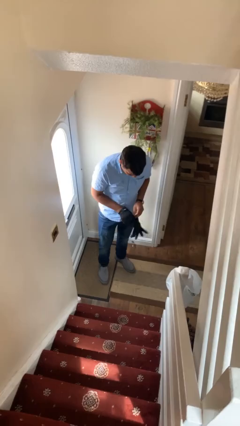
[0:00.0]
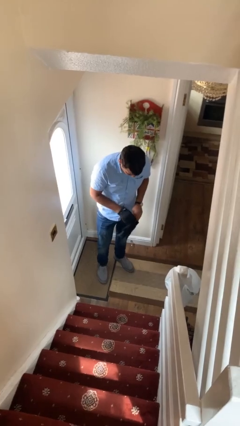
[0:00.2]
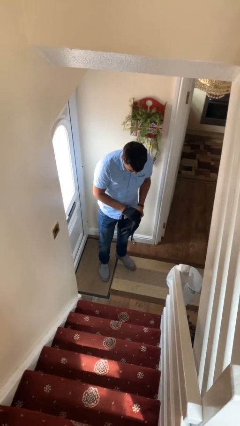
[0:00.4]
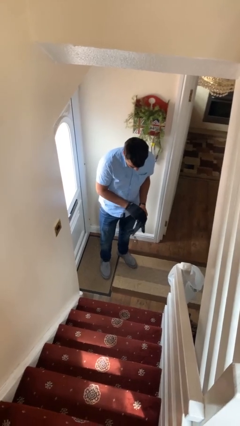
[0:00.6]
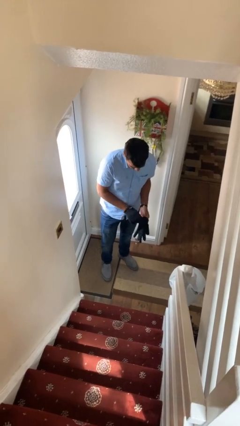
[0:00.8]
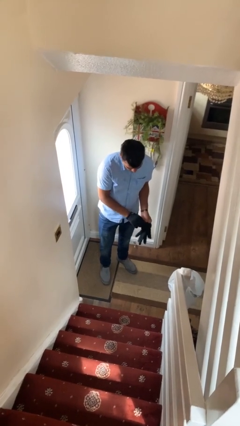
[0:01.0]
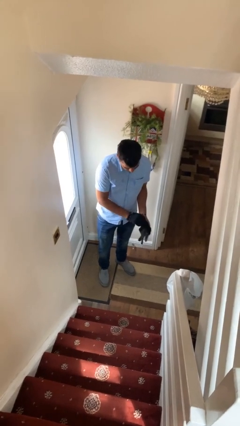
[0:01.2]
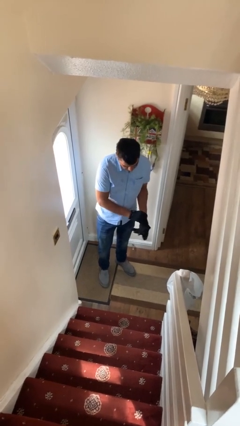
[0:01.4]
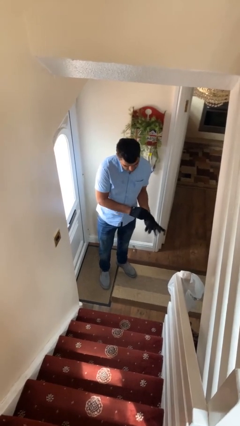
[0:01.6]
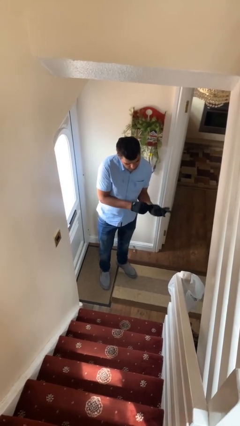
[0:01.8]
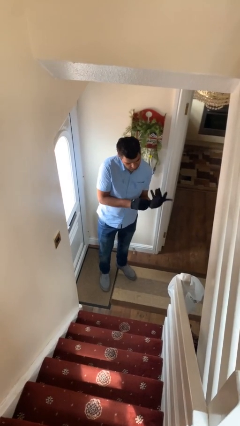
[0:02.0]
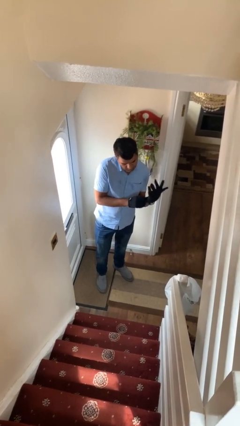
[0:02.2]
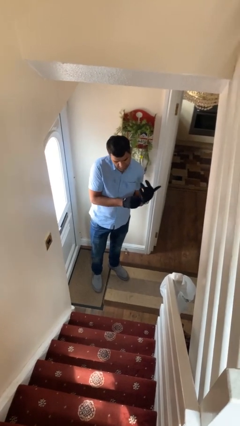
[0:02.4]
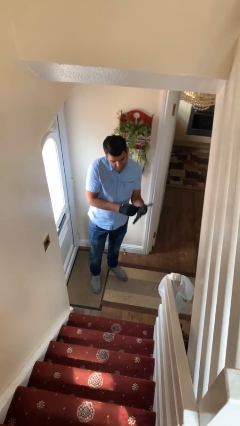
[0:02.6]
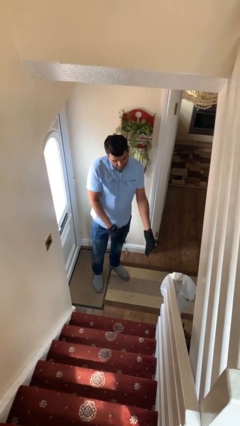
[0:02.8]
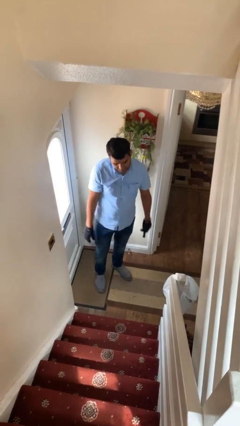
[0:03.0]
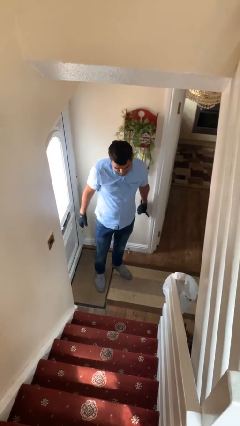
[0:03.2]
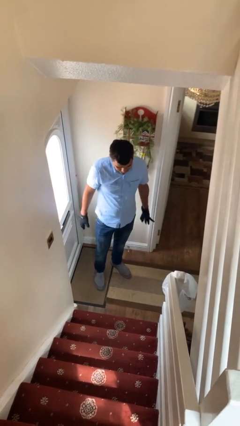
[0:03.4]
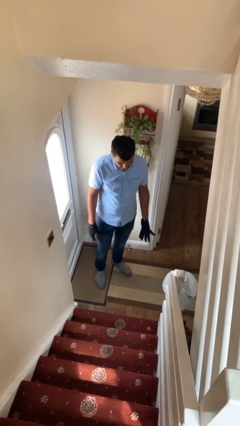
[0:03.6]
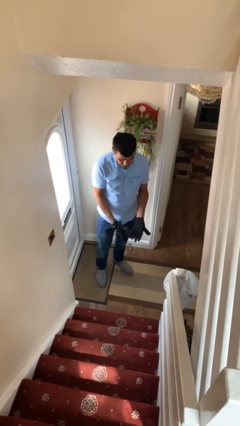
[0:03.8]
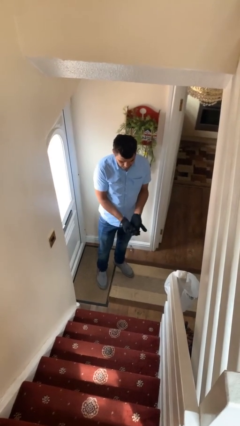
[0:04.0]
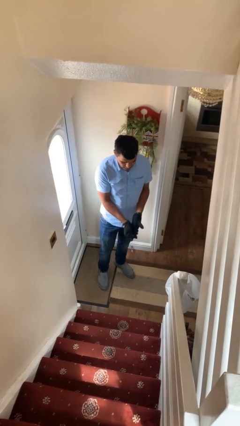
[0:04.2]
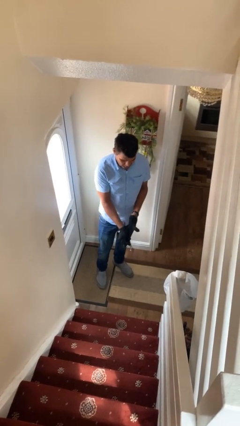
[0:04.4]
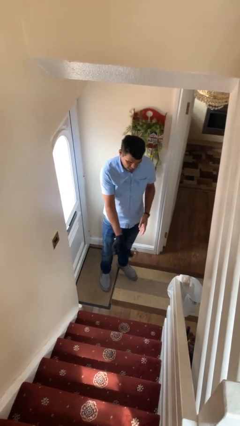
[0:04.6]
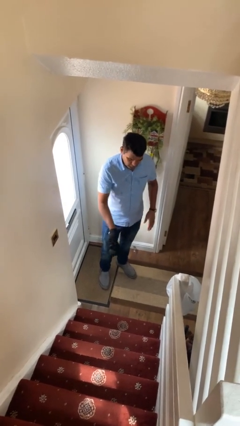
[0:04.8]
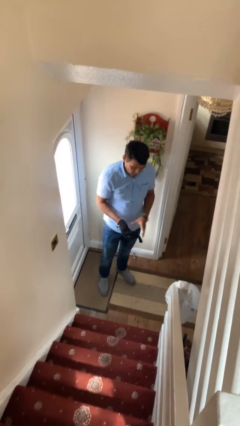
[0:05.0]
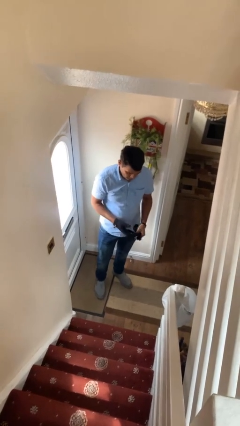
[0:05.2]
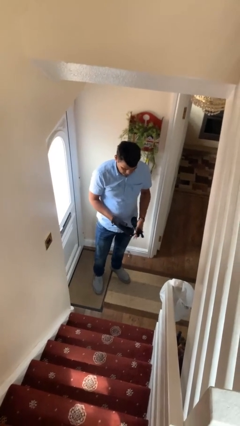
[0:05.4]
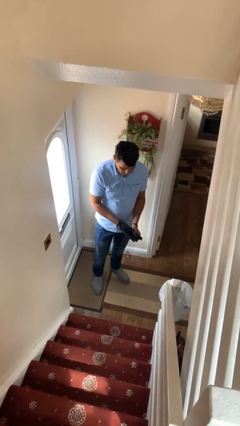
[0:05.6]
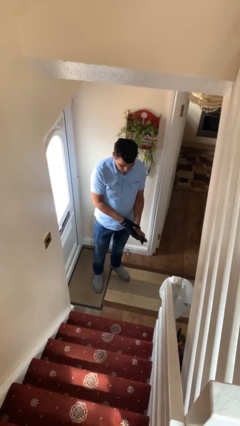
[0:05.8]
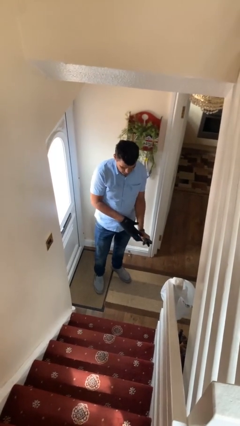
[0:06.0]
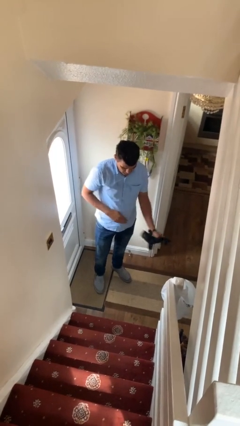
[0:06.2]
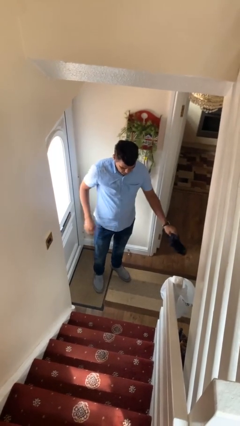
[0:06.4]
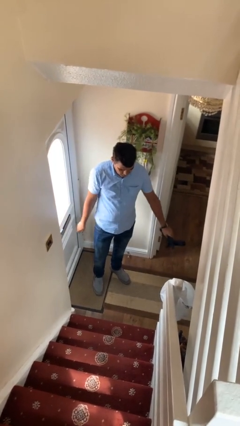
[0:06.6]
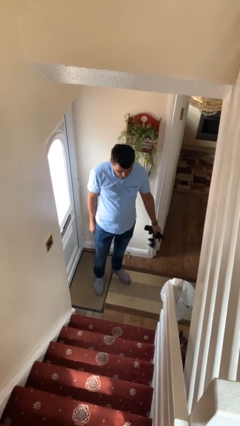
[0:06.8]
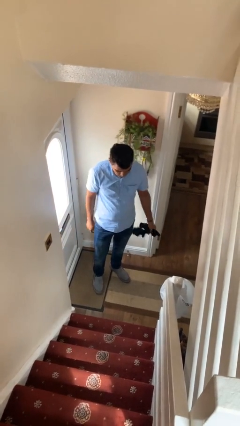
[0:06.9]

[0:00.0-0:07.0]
person takes off gloves

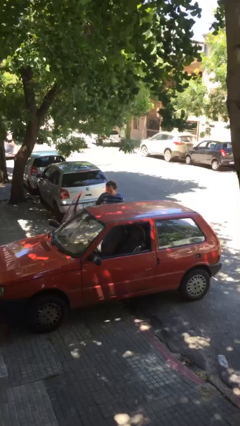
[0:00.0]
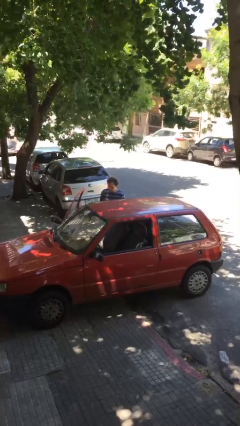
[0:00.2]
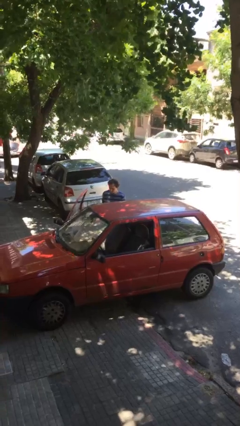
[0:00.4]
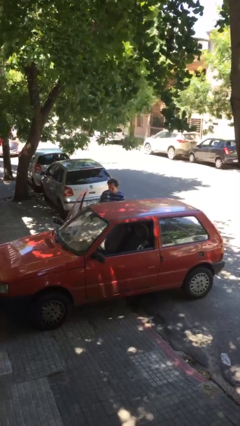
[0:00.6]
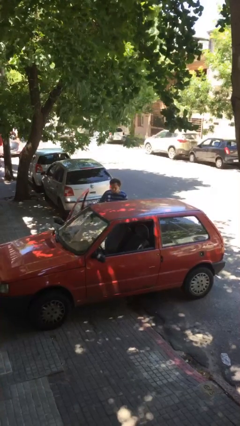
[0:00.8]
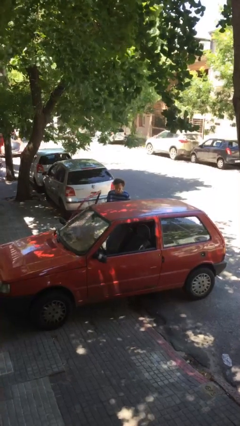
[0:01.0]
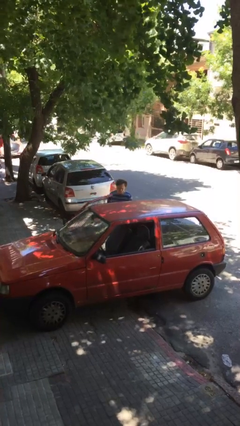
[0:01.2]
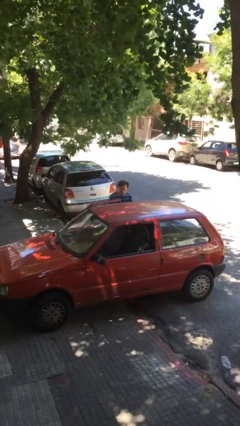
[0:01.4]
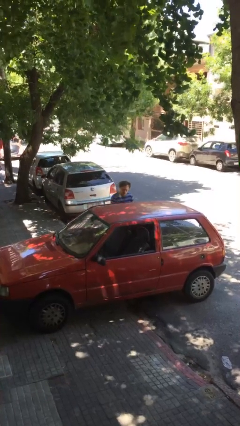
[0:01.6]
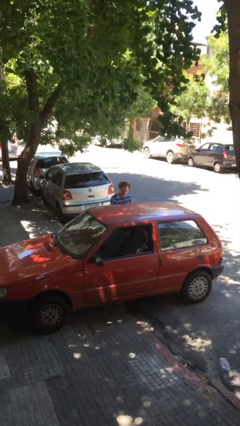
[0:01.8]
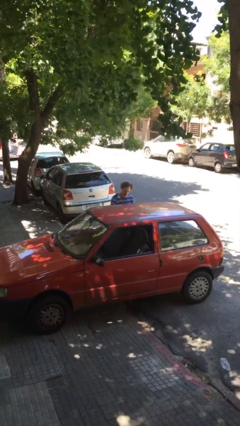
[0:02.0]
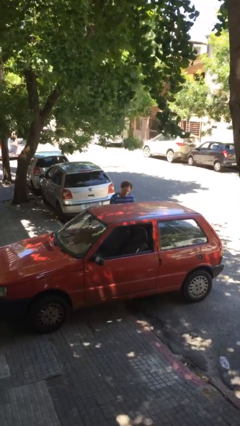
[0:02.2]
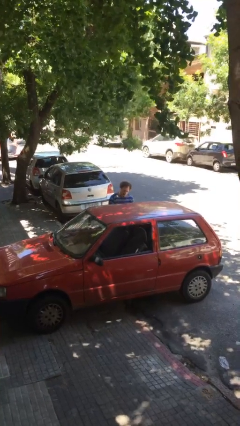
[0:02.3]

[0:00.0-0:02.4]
person closes car door

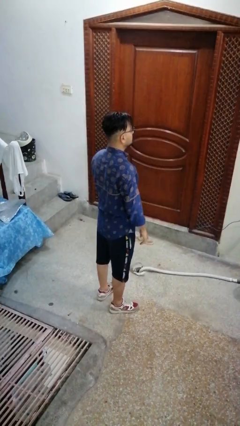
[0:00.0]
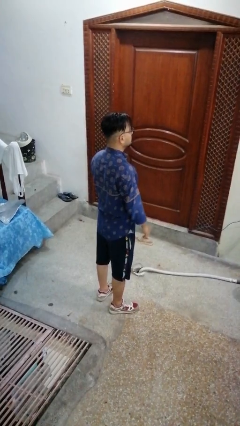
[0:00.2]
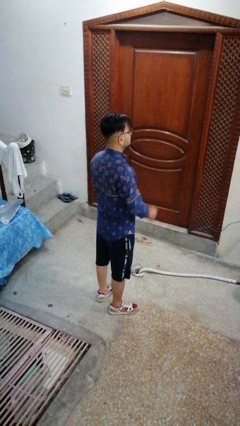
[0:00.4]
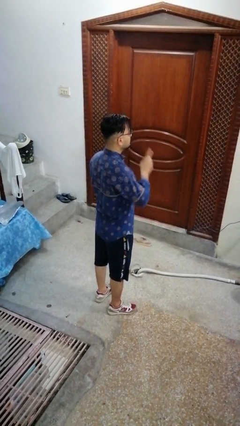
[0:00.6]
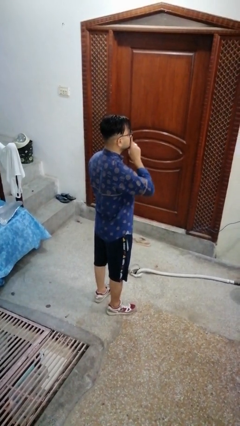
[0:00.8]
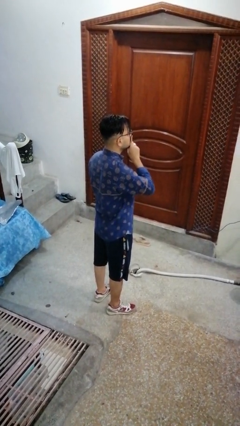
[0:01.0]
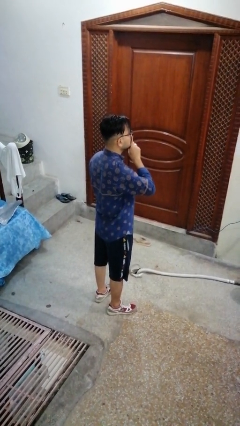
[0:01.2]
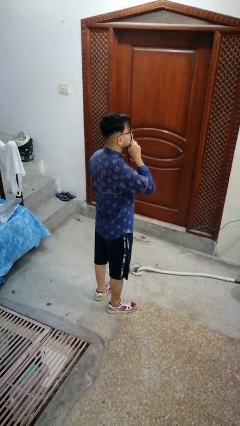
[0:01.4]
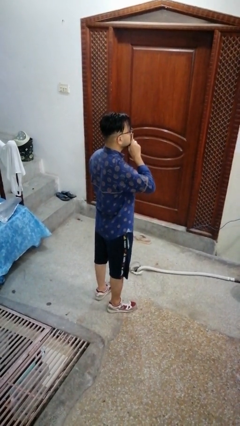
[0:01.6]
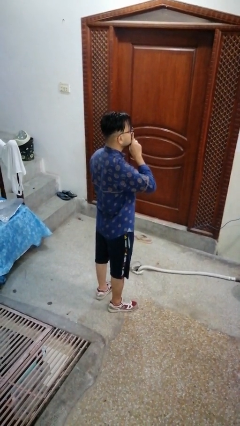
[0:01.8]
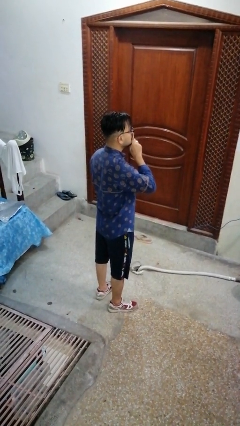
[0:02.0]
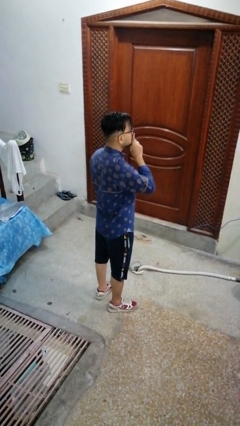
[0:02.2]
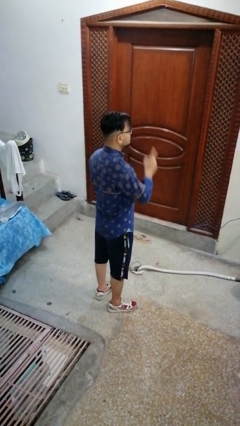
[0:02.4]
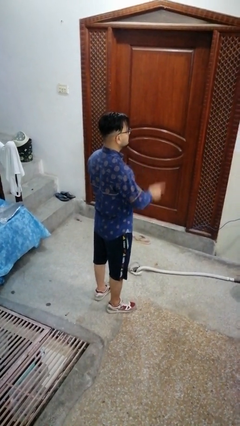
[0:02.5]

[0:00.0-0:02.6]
person gestures be quiet

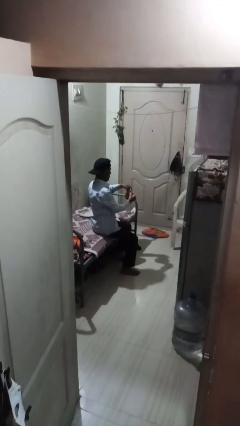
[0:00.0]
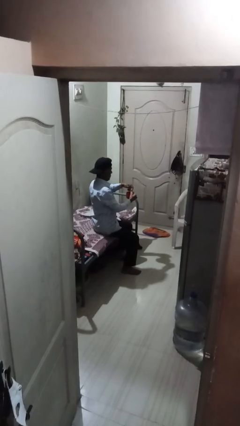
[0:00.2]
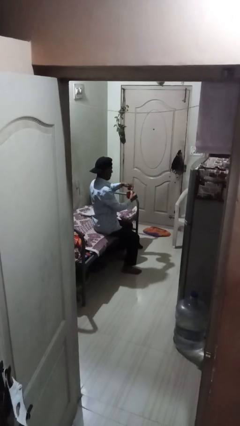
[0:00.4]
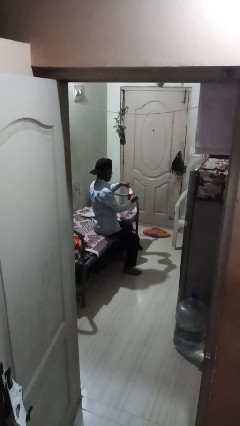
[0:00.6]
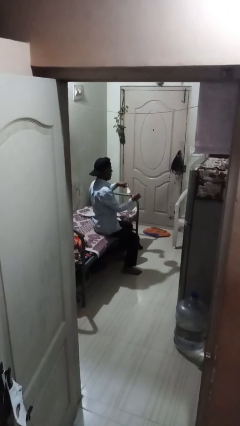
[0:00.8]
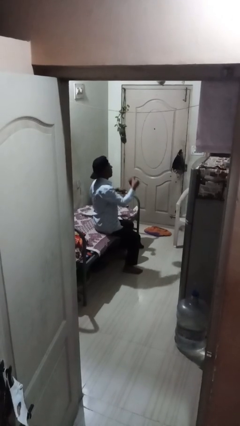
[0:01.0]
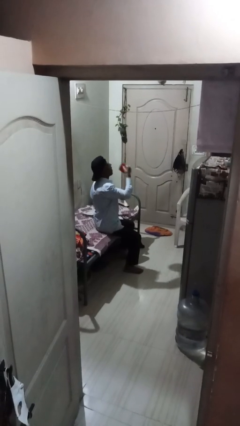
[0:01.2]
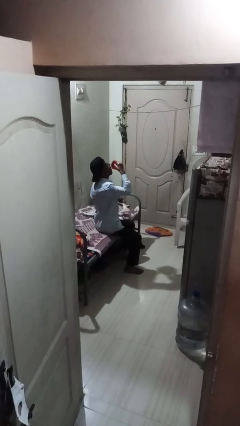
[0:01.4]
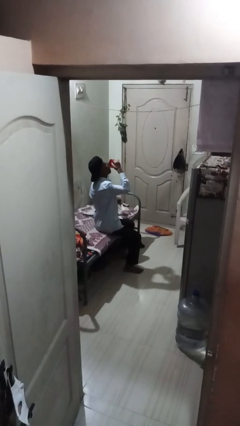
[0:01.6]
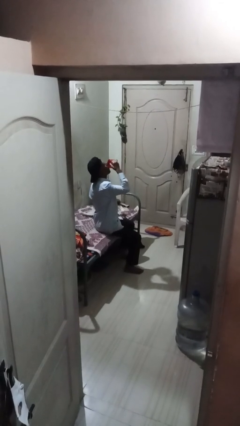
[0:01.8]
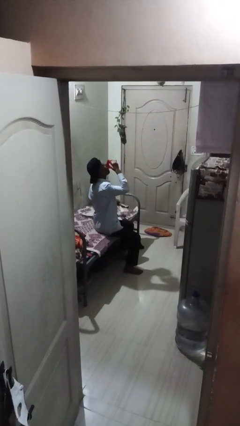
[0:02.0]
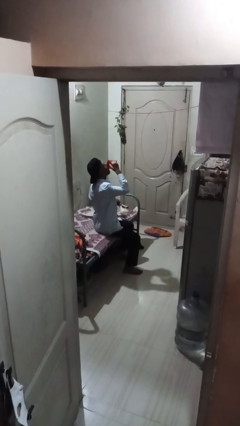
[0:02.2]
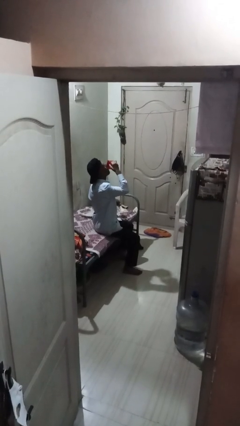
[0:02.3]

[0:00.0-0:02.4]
person drinks from mug

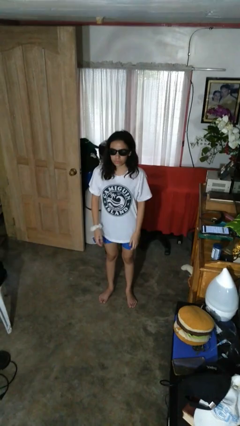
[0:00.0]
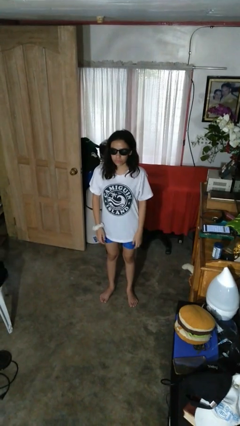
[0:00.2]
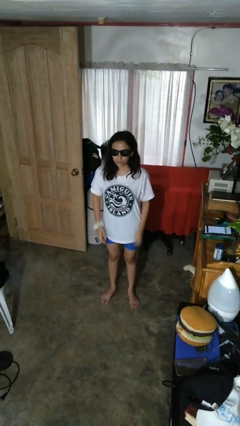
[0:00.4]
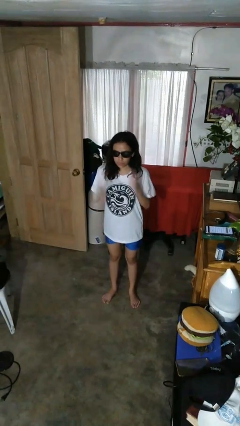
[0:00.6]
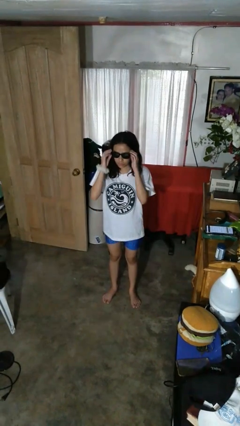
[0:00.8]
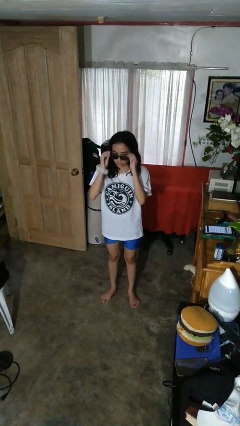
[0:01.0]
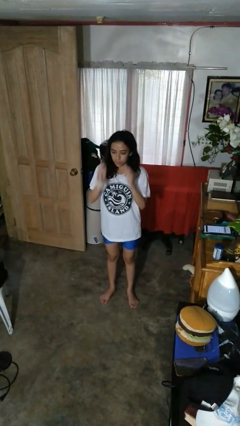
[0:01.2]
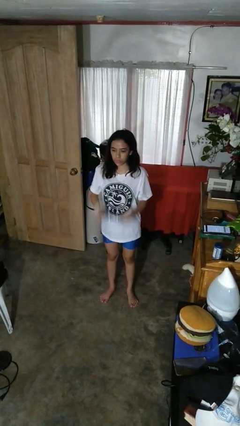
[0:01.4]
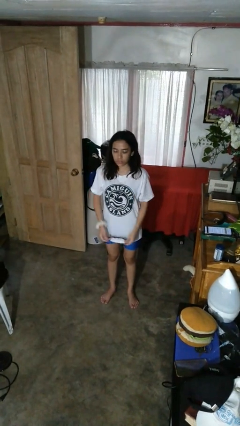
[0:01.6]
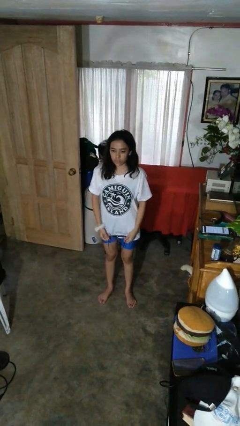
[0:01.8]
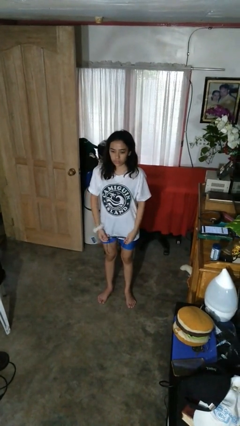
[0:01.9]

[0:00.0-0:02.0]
person takes off sunglasses

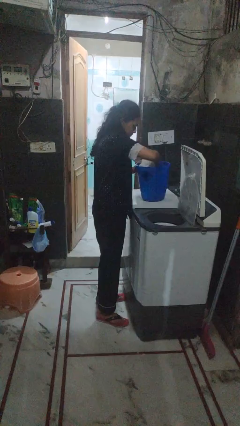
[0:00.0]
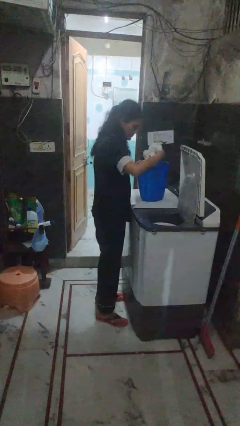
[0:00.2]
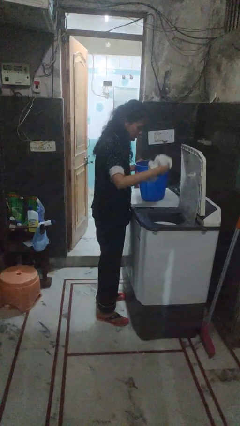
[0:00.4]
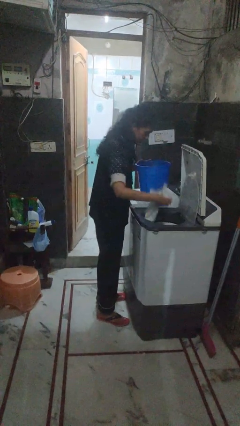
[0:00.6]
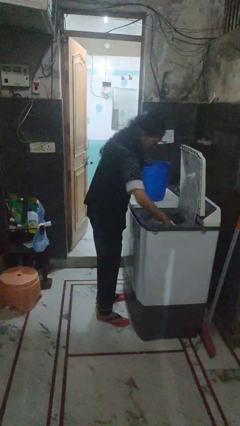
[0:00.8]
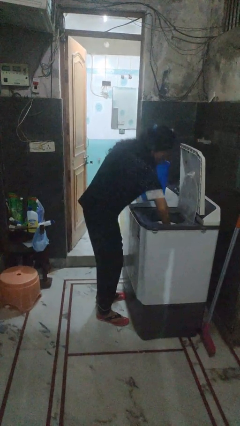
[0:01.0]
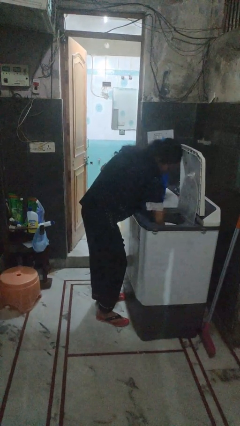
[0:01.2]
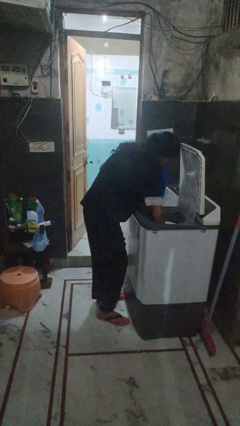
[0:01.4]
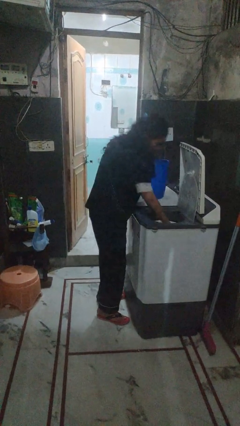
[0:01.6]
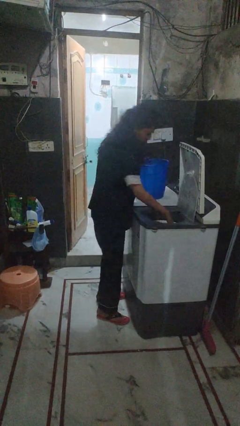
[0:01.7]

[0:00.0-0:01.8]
person loads dryer
